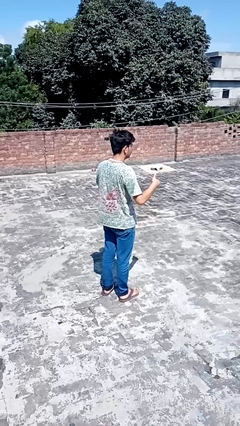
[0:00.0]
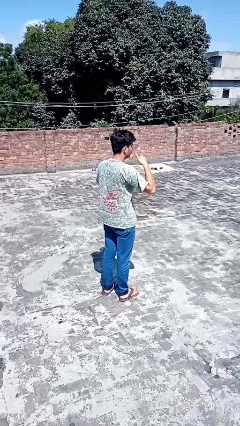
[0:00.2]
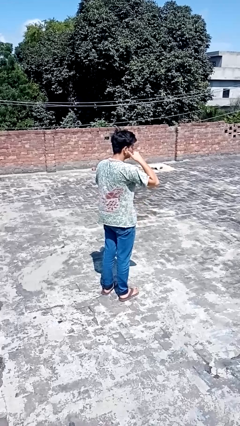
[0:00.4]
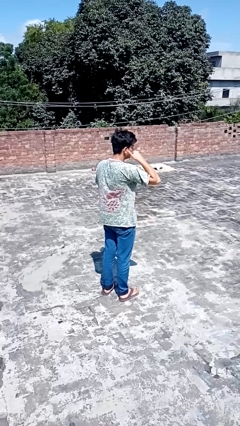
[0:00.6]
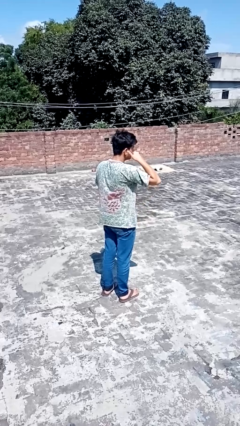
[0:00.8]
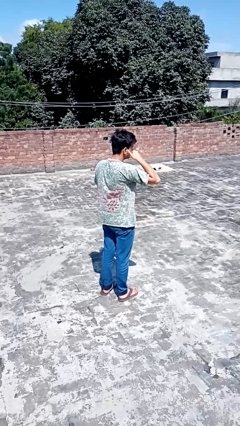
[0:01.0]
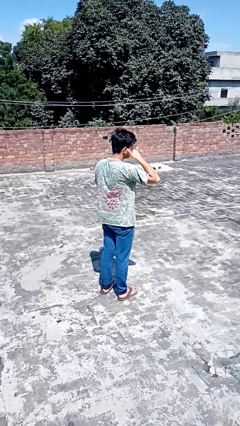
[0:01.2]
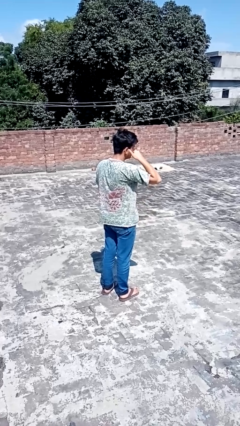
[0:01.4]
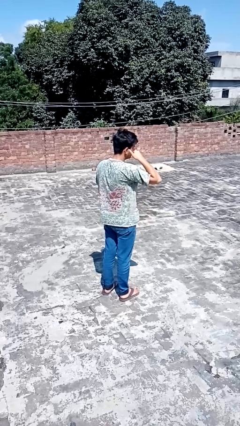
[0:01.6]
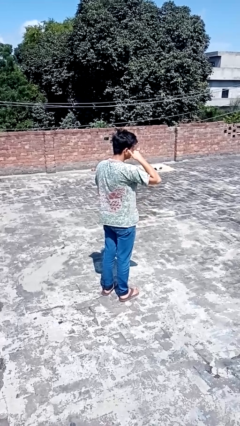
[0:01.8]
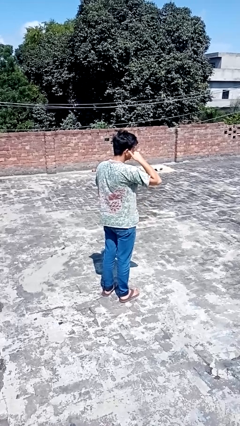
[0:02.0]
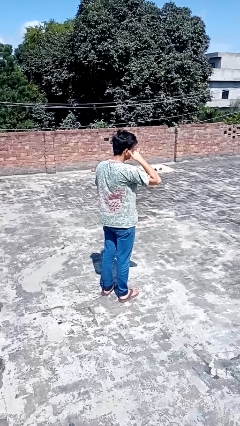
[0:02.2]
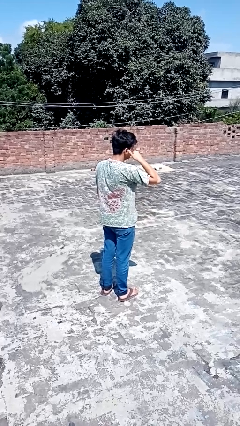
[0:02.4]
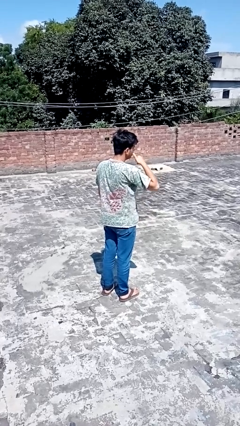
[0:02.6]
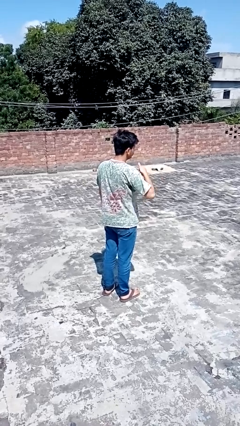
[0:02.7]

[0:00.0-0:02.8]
person gestures call me

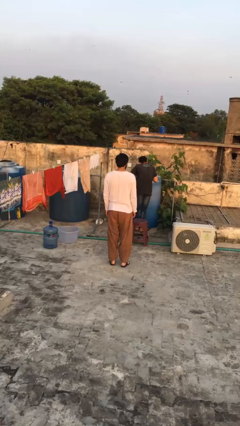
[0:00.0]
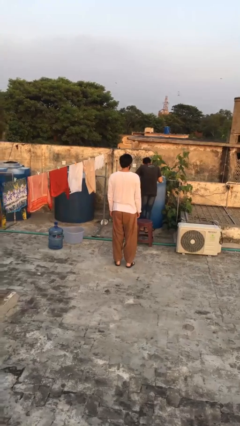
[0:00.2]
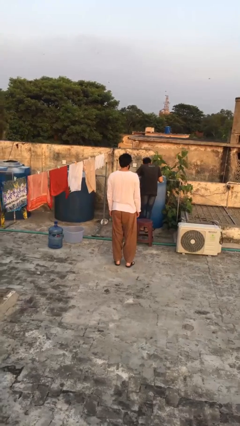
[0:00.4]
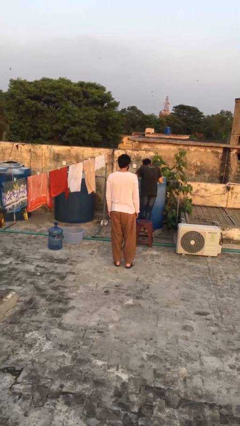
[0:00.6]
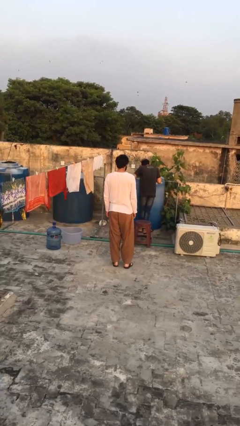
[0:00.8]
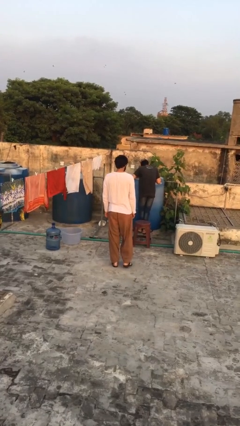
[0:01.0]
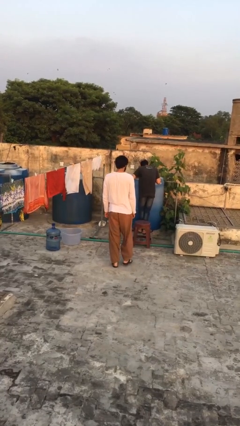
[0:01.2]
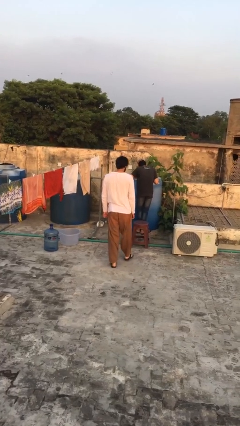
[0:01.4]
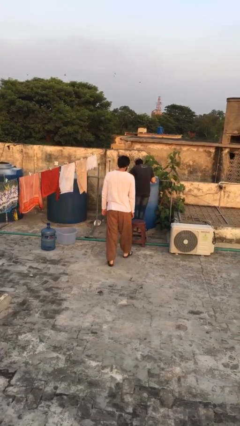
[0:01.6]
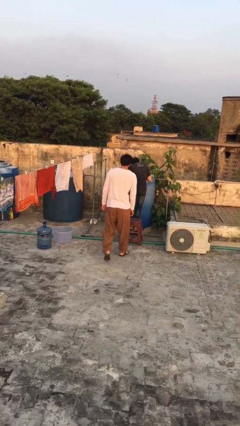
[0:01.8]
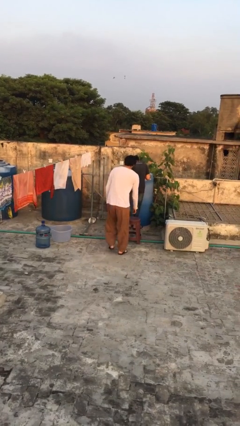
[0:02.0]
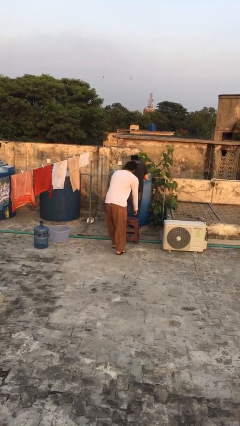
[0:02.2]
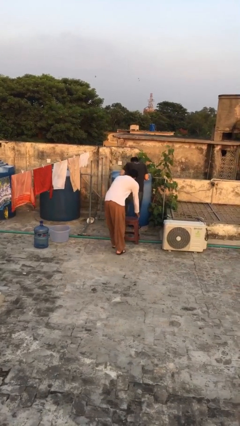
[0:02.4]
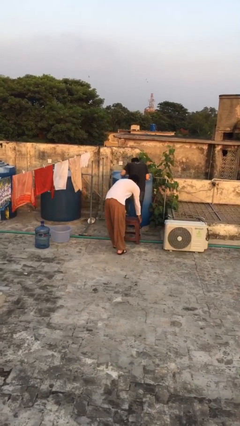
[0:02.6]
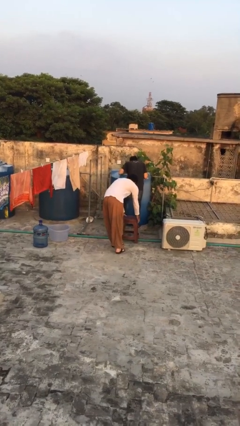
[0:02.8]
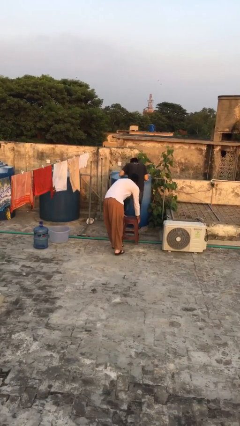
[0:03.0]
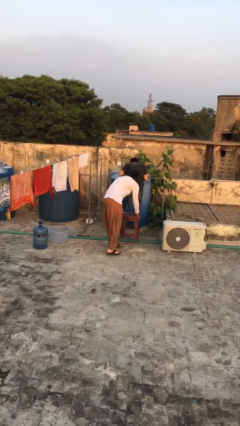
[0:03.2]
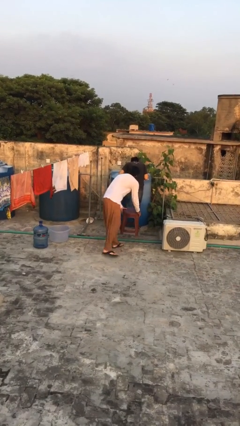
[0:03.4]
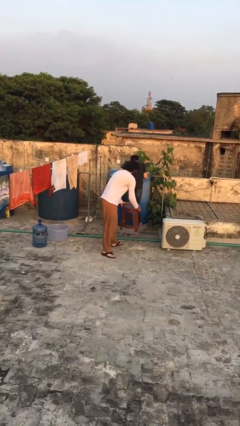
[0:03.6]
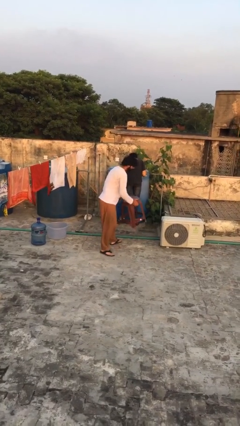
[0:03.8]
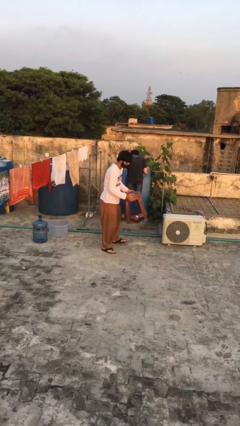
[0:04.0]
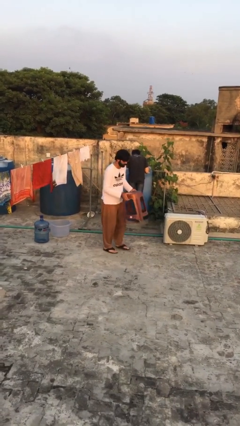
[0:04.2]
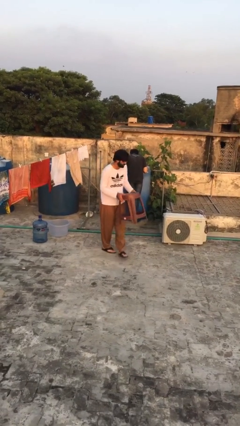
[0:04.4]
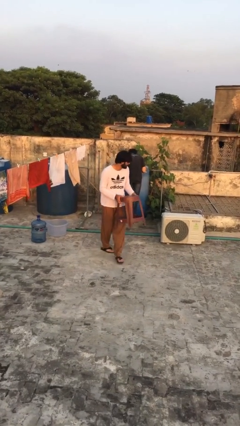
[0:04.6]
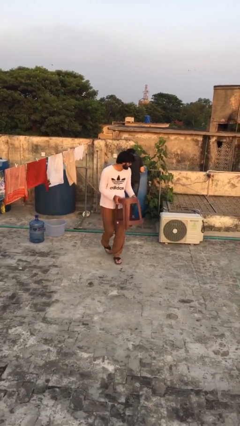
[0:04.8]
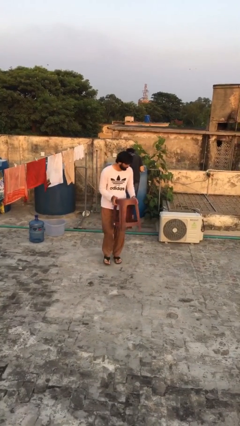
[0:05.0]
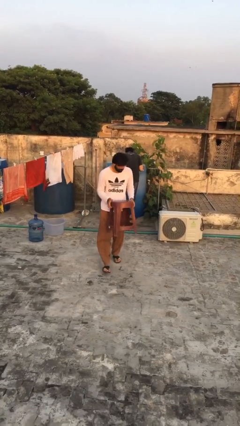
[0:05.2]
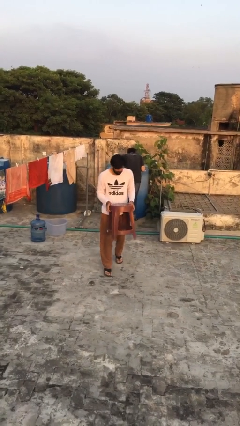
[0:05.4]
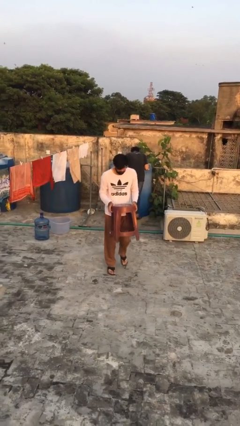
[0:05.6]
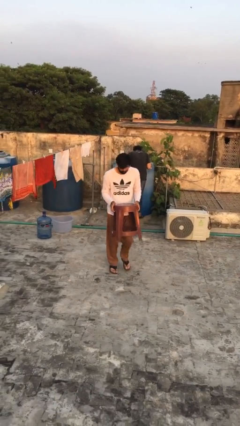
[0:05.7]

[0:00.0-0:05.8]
person steals object from person

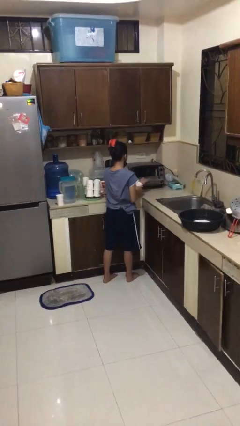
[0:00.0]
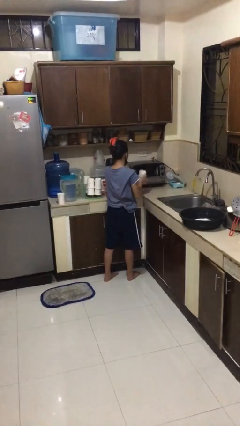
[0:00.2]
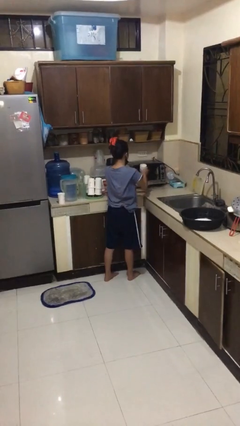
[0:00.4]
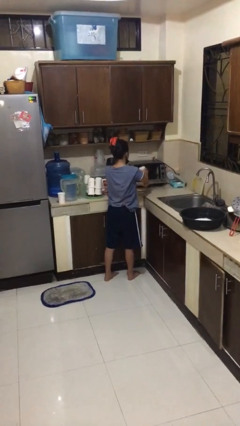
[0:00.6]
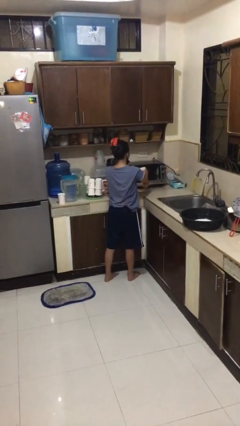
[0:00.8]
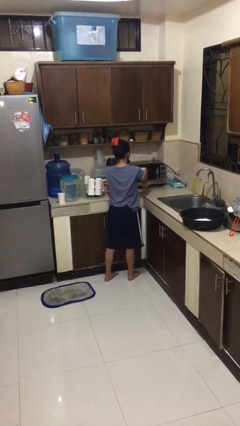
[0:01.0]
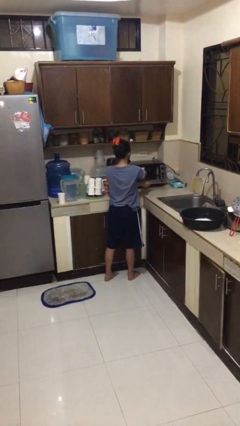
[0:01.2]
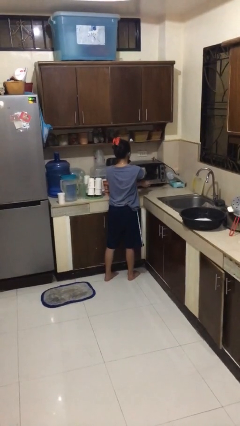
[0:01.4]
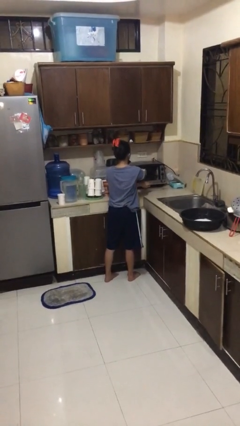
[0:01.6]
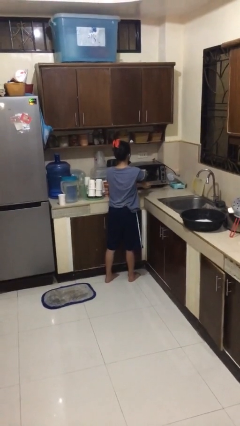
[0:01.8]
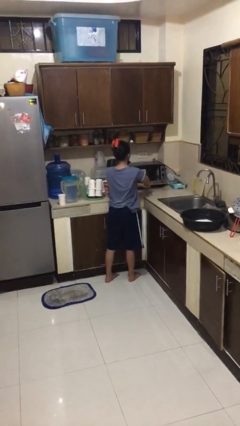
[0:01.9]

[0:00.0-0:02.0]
person puts object into microwave

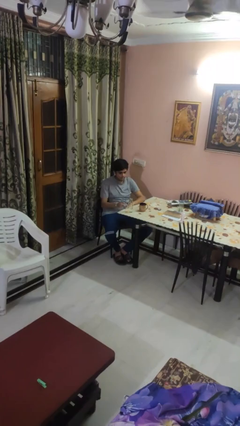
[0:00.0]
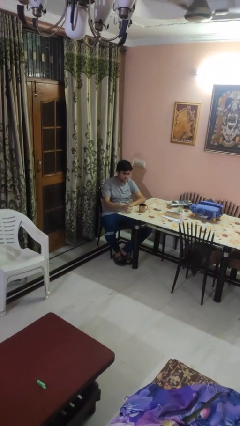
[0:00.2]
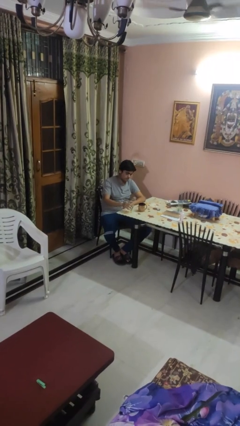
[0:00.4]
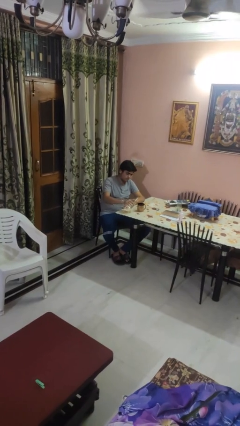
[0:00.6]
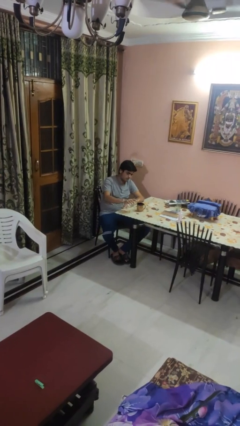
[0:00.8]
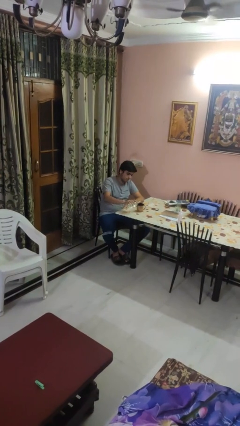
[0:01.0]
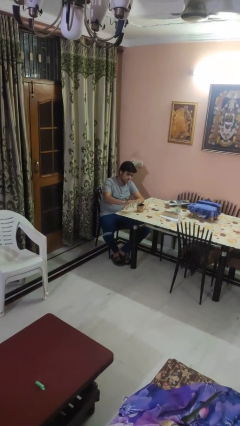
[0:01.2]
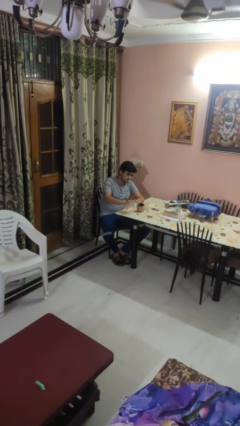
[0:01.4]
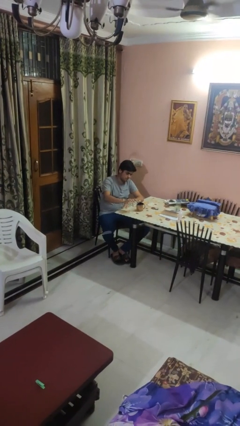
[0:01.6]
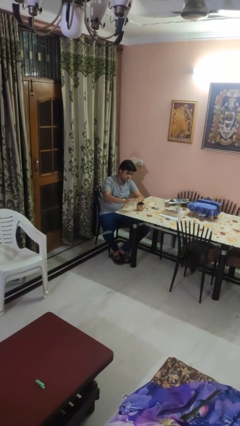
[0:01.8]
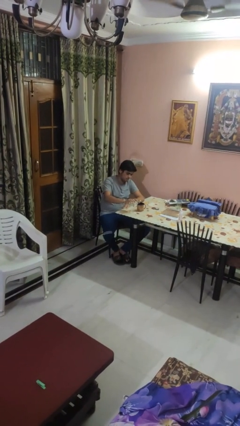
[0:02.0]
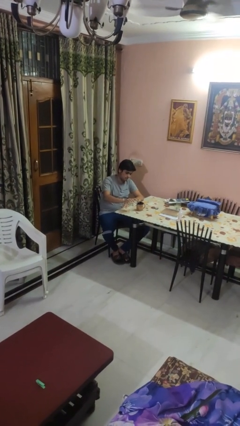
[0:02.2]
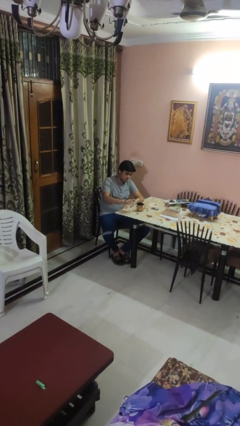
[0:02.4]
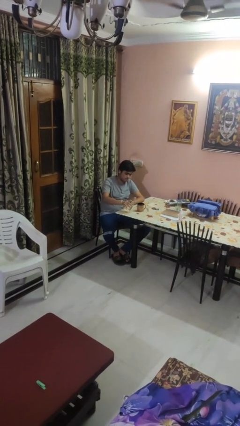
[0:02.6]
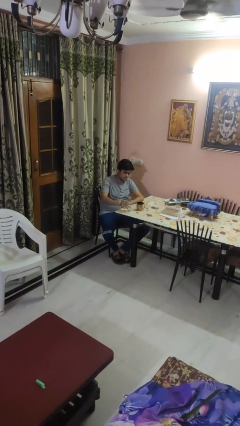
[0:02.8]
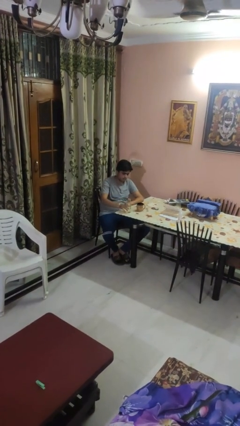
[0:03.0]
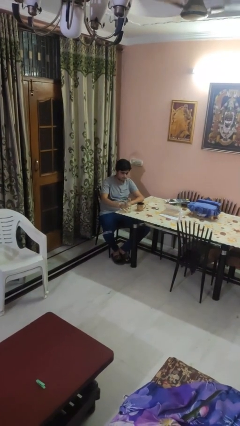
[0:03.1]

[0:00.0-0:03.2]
person pours liquid into cup

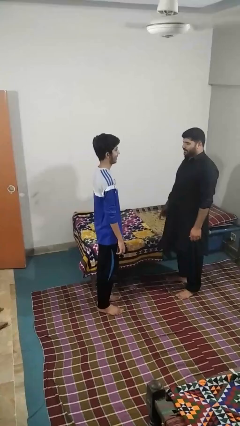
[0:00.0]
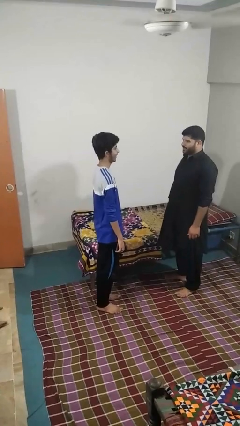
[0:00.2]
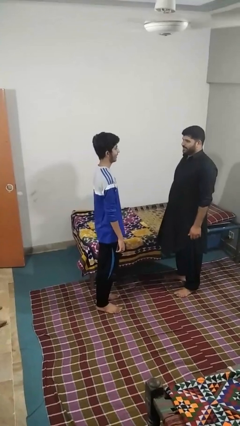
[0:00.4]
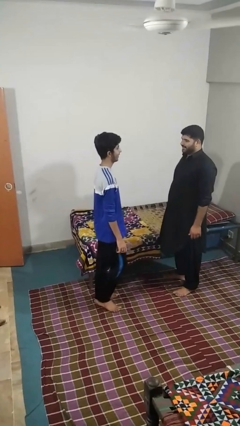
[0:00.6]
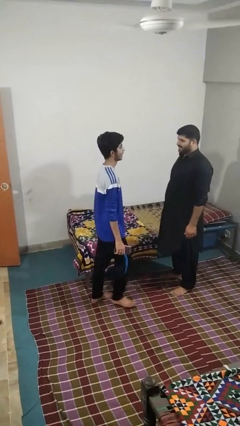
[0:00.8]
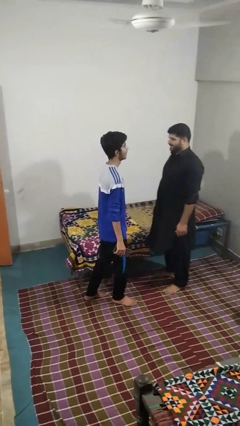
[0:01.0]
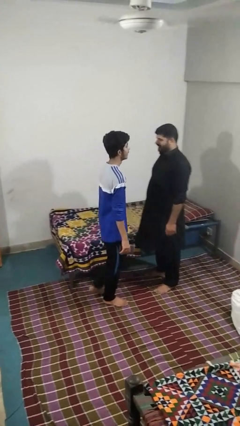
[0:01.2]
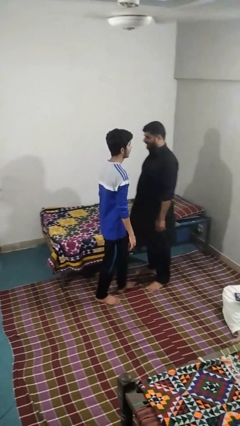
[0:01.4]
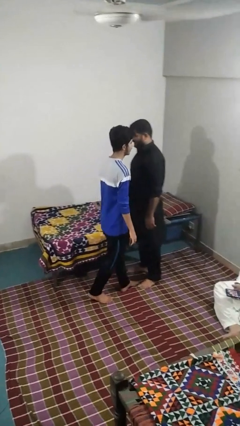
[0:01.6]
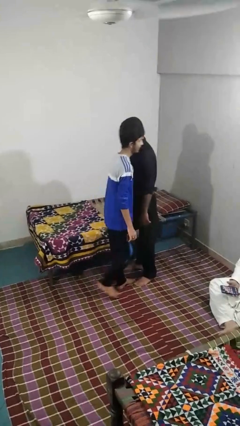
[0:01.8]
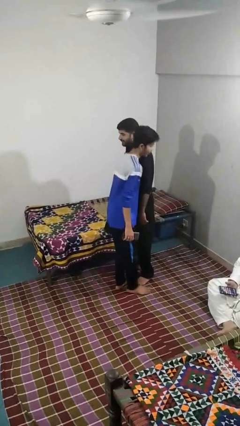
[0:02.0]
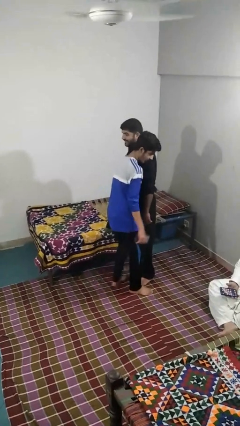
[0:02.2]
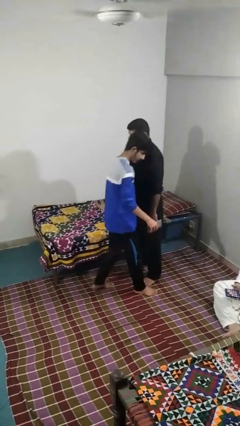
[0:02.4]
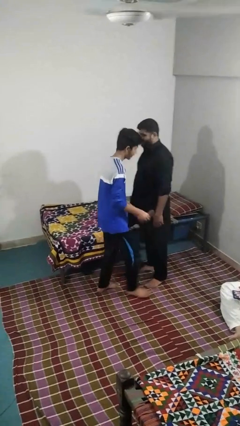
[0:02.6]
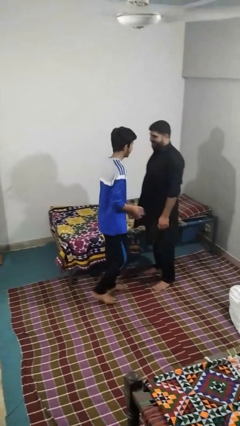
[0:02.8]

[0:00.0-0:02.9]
person bumps into person

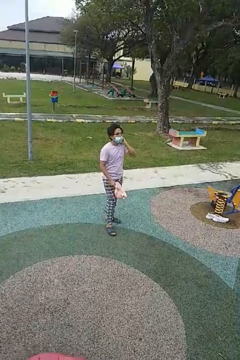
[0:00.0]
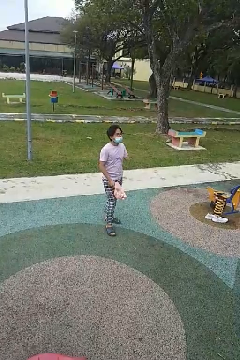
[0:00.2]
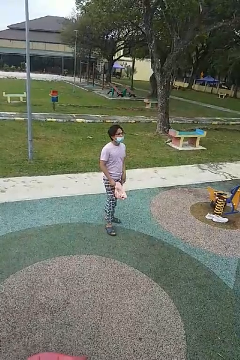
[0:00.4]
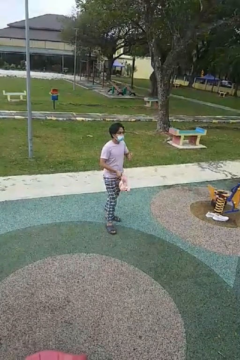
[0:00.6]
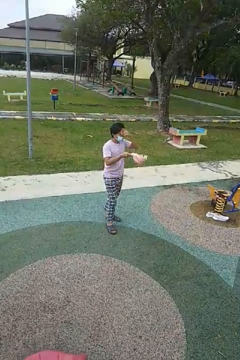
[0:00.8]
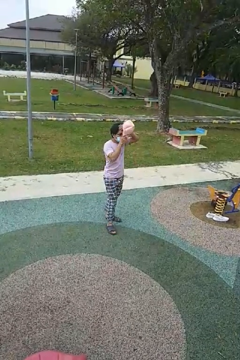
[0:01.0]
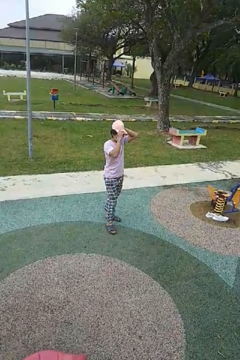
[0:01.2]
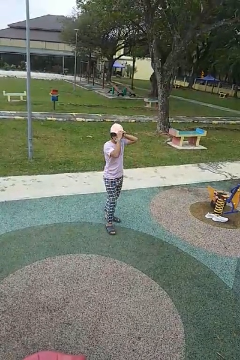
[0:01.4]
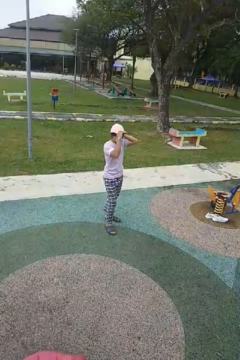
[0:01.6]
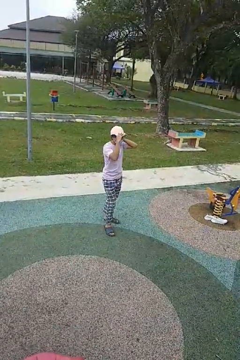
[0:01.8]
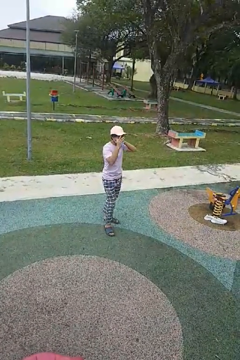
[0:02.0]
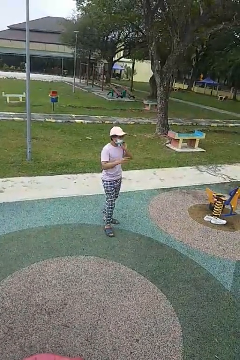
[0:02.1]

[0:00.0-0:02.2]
person puts on hat
